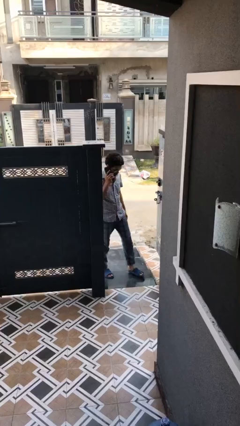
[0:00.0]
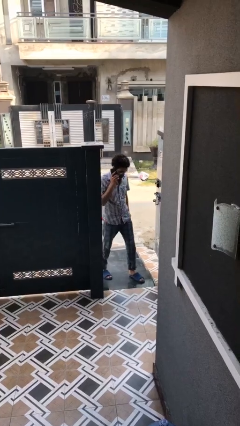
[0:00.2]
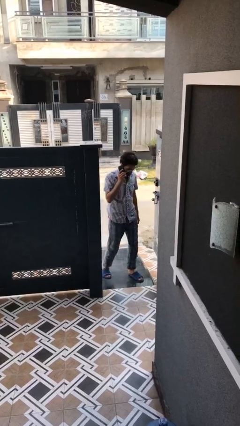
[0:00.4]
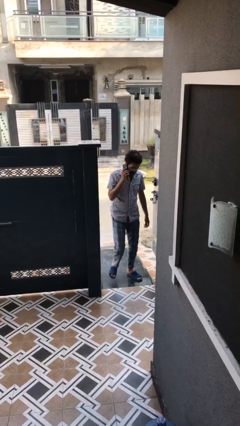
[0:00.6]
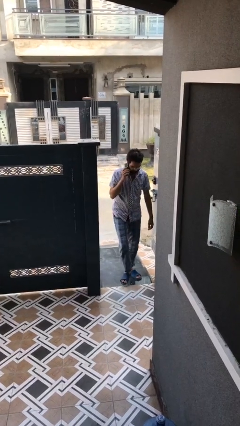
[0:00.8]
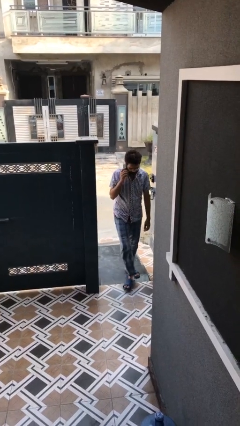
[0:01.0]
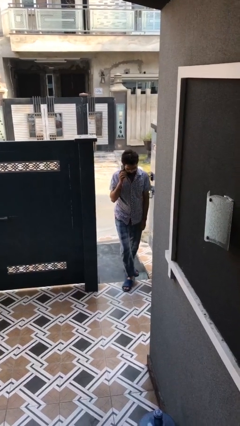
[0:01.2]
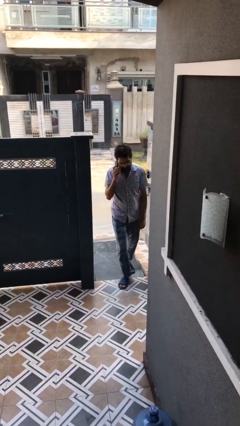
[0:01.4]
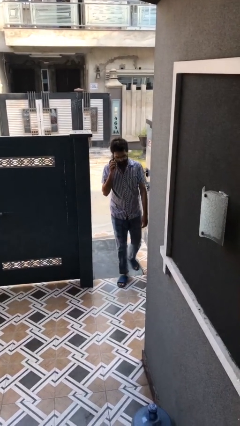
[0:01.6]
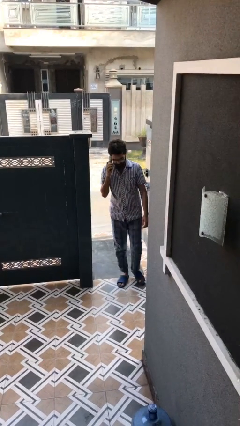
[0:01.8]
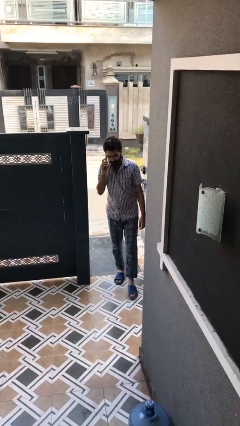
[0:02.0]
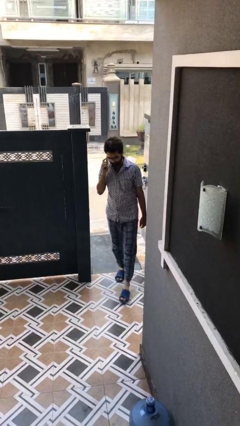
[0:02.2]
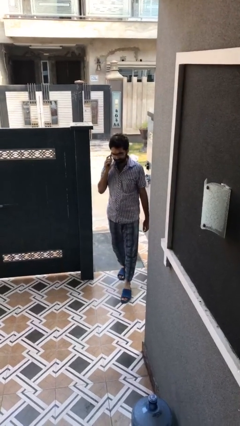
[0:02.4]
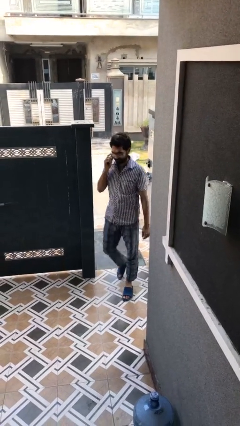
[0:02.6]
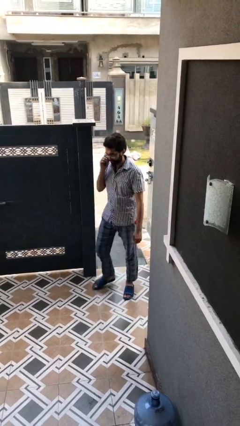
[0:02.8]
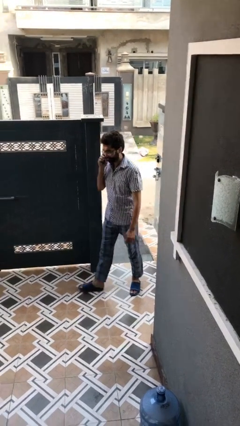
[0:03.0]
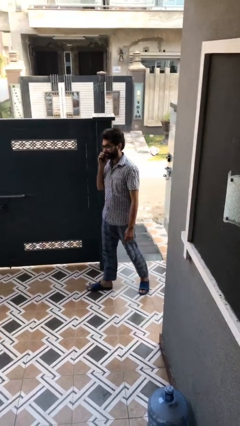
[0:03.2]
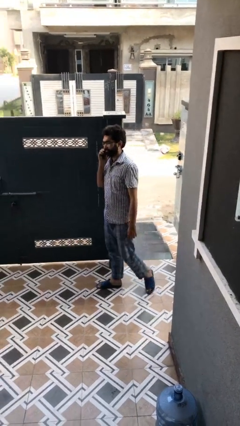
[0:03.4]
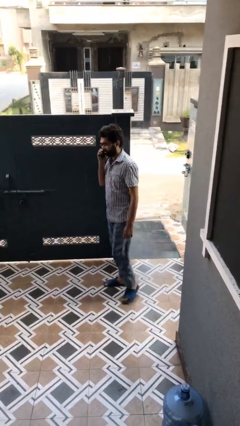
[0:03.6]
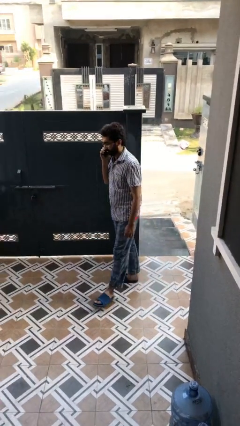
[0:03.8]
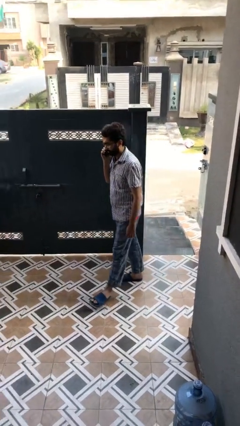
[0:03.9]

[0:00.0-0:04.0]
person enters scene through structure

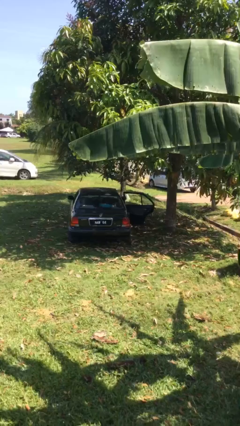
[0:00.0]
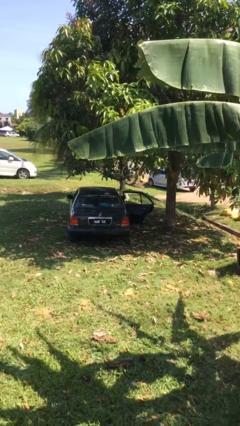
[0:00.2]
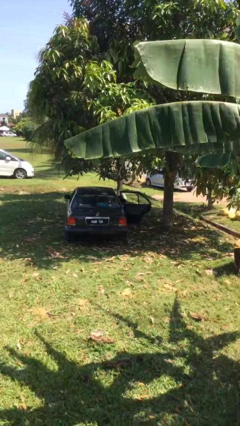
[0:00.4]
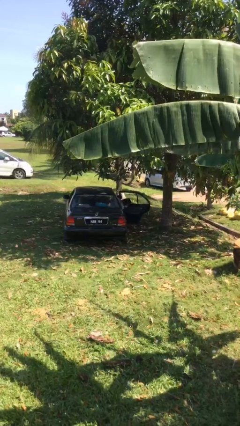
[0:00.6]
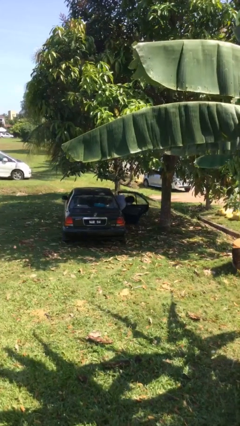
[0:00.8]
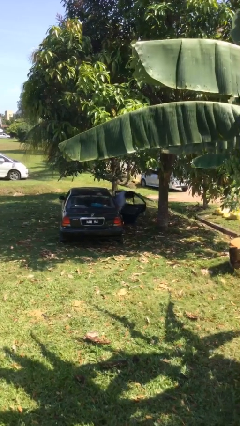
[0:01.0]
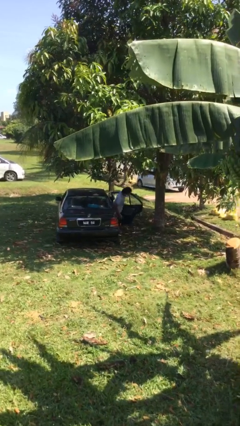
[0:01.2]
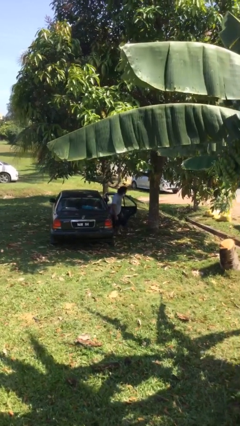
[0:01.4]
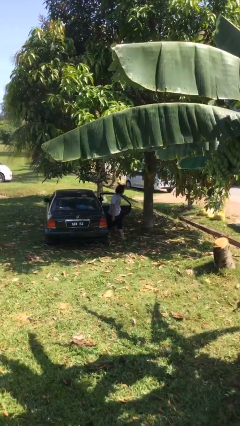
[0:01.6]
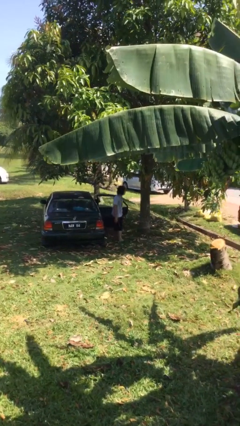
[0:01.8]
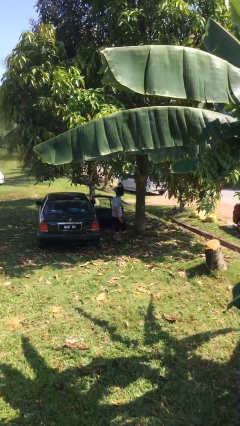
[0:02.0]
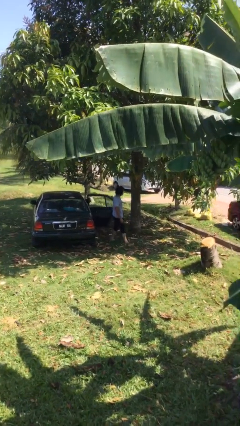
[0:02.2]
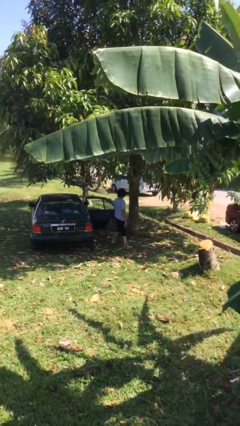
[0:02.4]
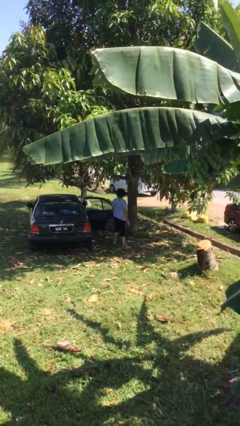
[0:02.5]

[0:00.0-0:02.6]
person exits car

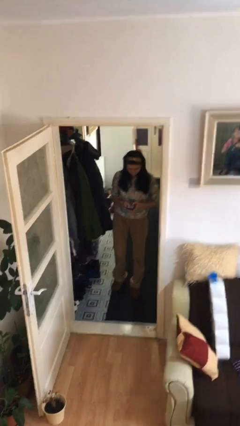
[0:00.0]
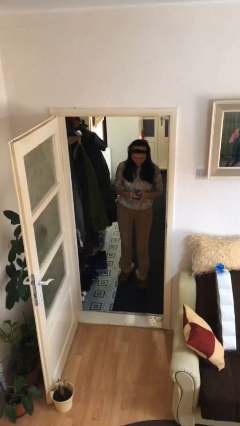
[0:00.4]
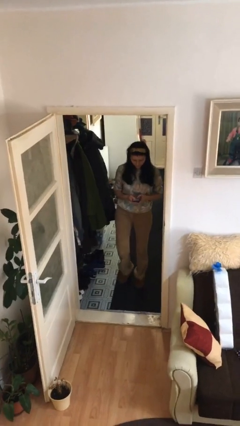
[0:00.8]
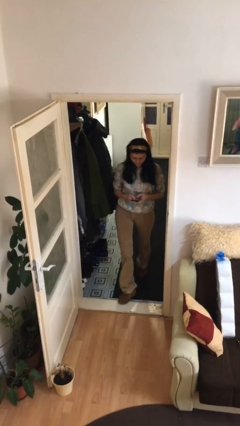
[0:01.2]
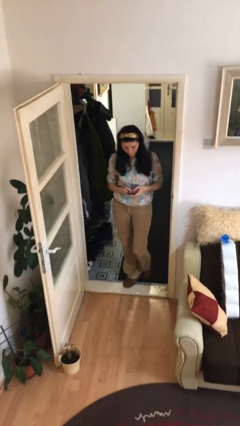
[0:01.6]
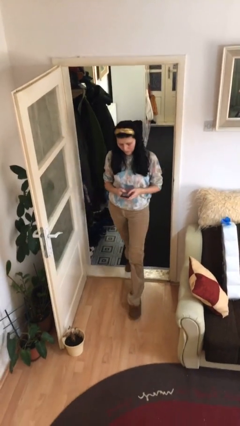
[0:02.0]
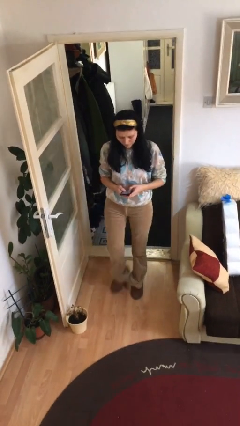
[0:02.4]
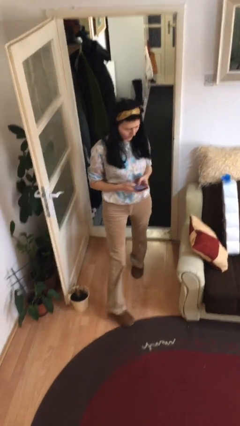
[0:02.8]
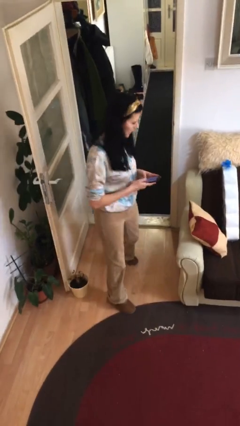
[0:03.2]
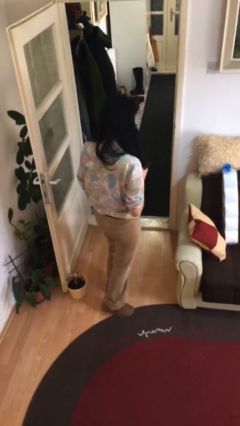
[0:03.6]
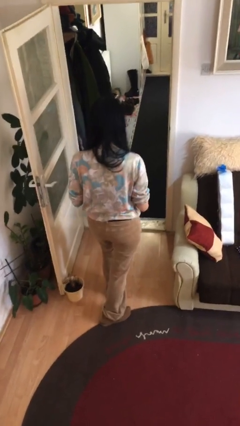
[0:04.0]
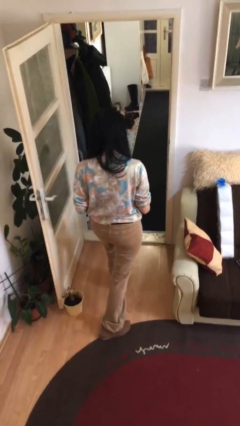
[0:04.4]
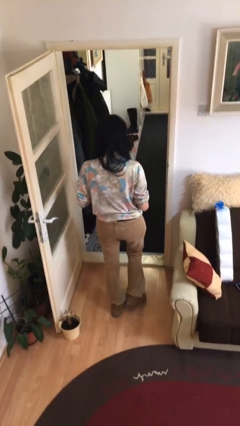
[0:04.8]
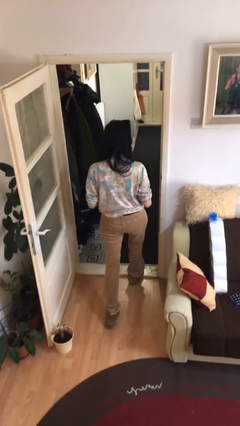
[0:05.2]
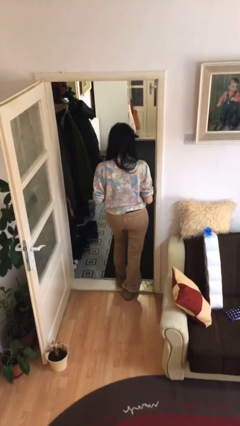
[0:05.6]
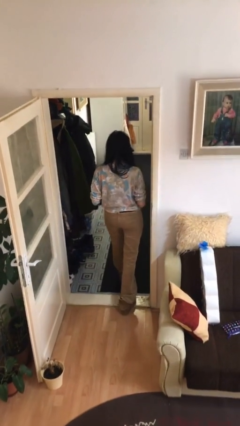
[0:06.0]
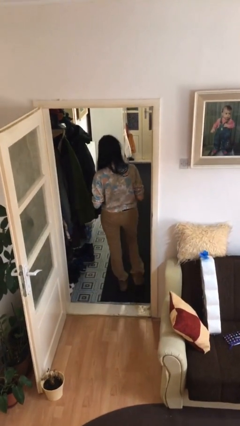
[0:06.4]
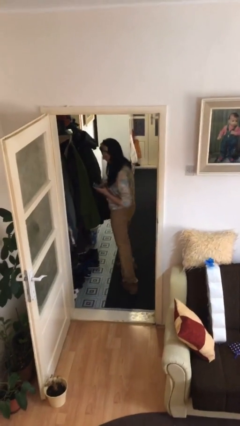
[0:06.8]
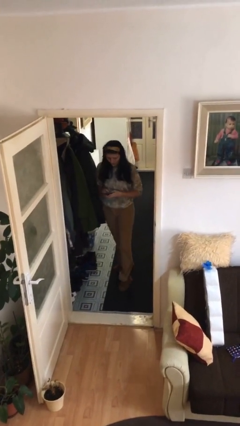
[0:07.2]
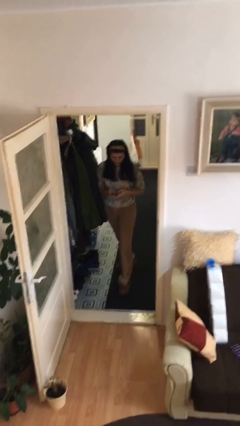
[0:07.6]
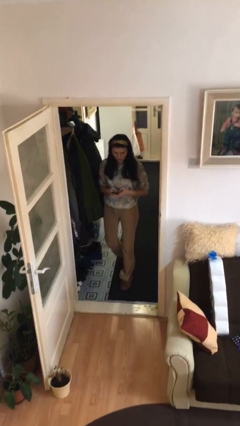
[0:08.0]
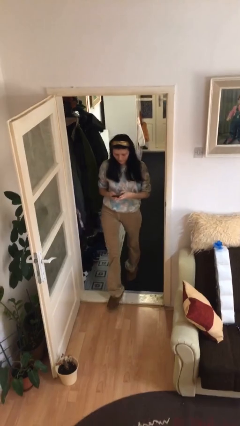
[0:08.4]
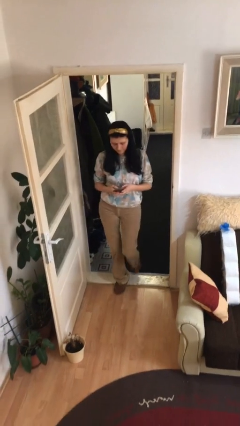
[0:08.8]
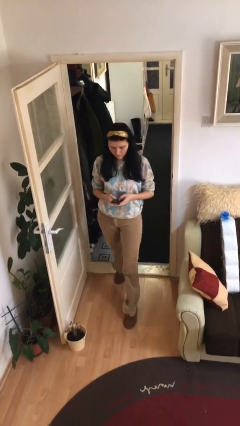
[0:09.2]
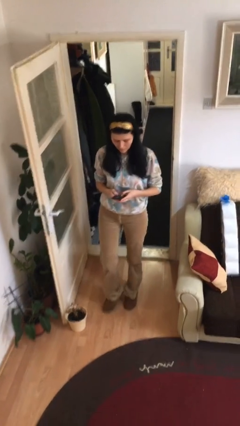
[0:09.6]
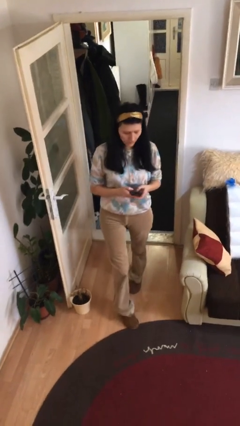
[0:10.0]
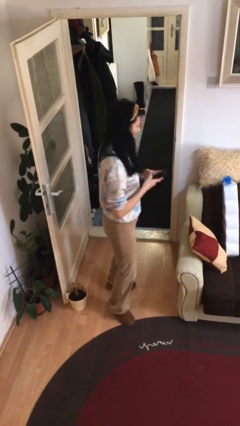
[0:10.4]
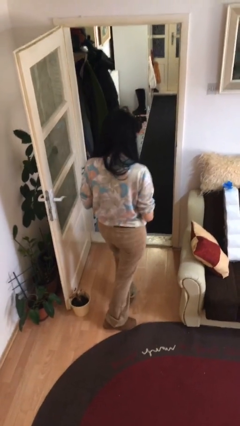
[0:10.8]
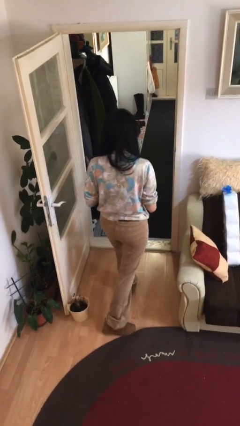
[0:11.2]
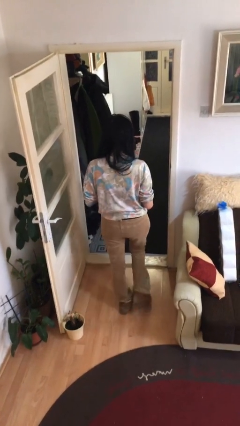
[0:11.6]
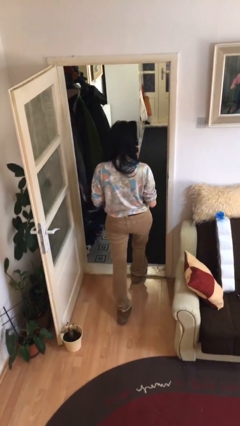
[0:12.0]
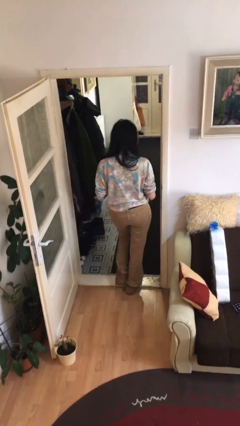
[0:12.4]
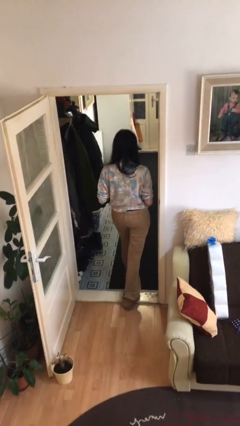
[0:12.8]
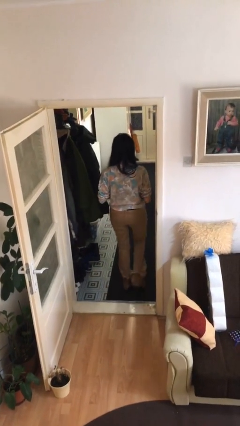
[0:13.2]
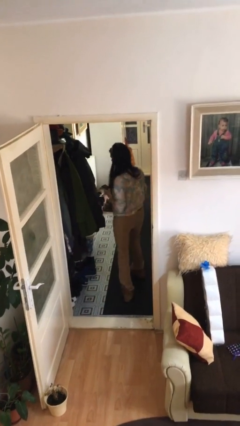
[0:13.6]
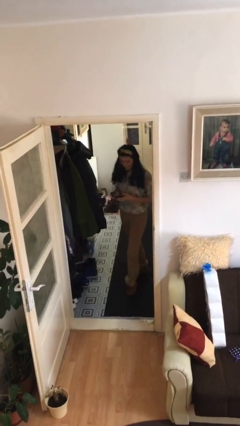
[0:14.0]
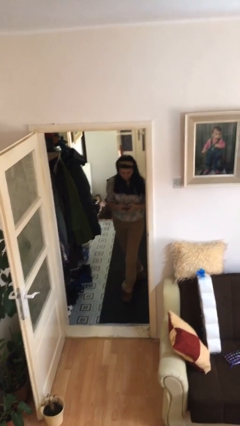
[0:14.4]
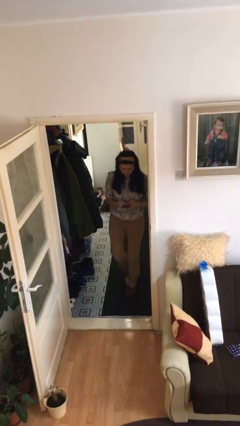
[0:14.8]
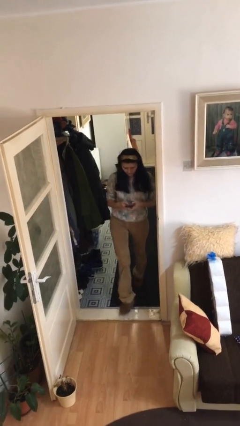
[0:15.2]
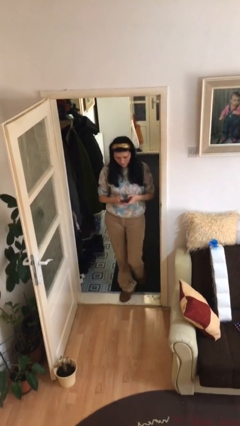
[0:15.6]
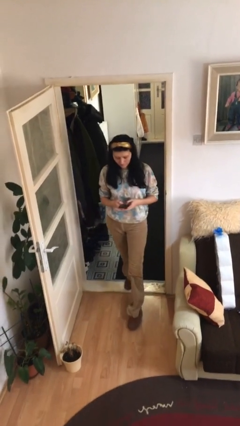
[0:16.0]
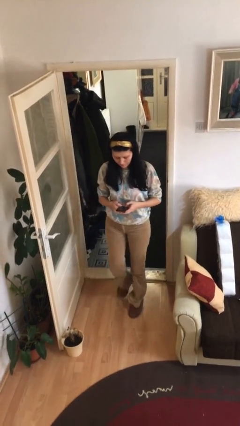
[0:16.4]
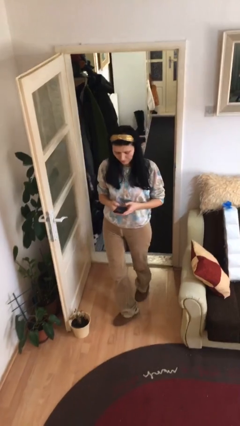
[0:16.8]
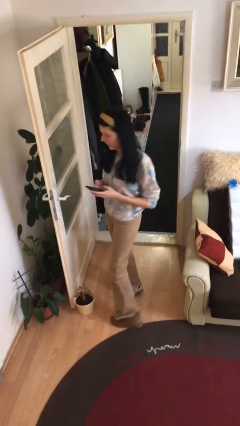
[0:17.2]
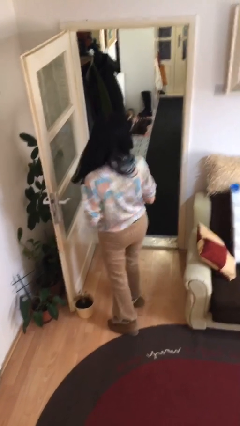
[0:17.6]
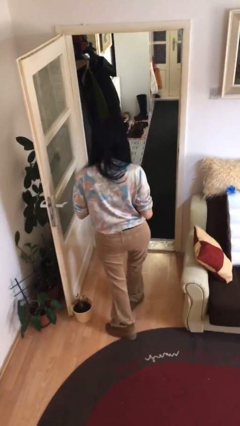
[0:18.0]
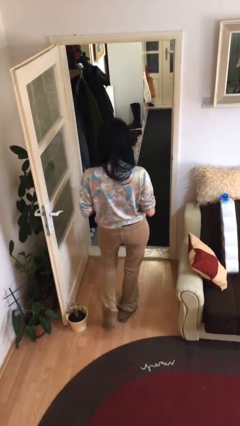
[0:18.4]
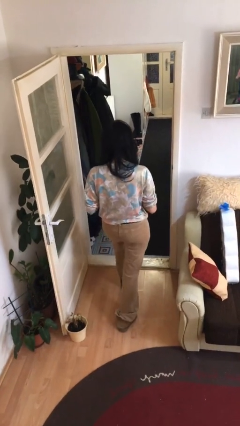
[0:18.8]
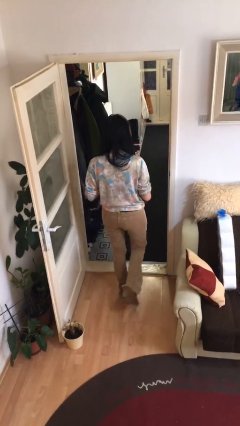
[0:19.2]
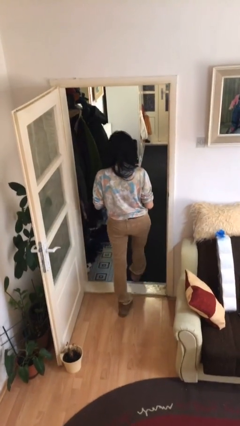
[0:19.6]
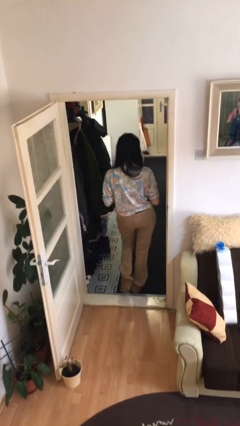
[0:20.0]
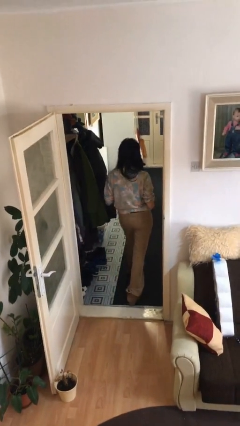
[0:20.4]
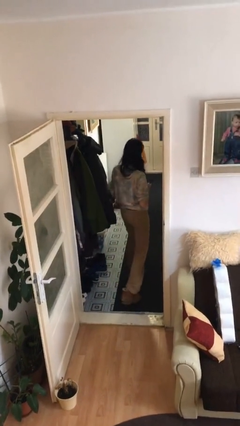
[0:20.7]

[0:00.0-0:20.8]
person texts on phone

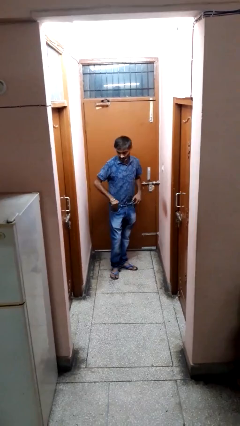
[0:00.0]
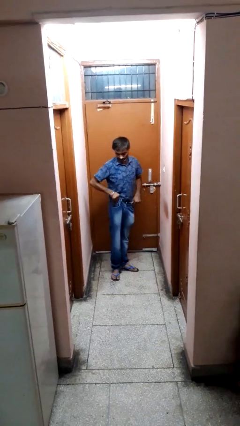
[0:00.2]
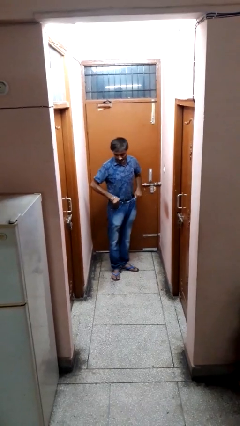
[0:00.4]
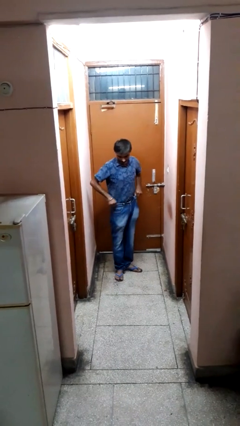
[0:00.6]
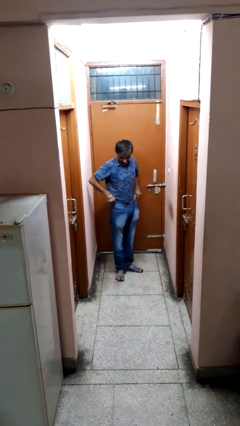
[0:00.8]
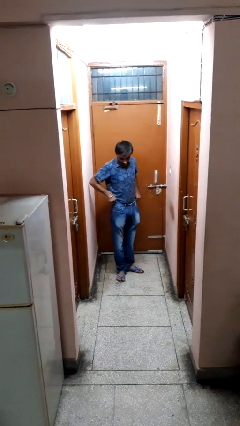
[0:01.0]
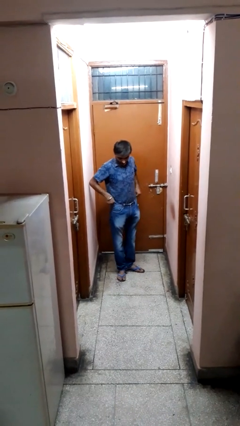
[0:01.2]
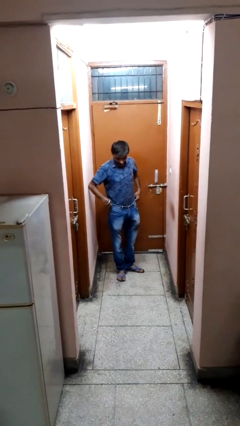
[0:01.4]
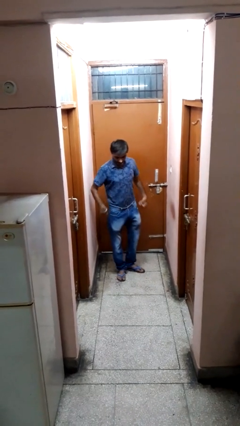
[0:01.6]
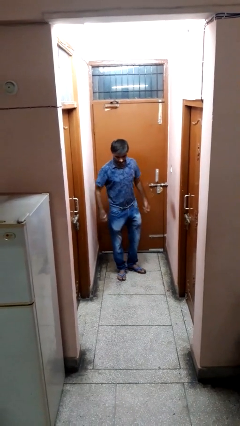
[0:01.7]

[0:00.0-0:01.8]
person hikes up pants
